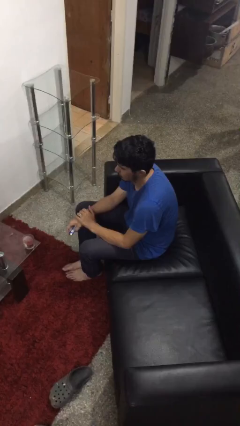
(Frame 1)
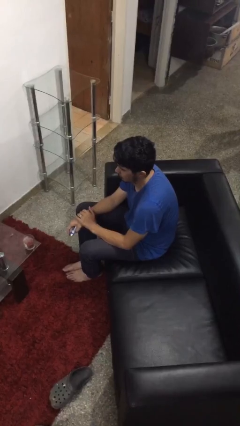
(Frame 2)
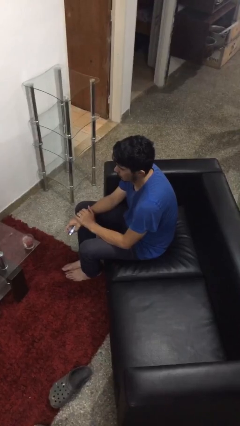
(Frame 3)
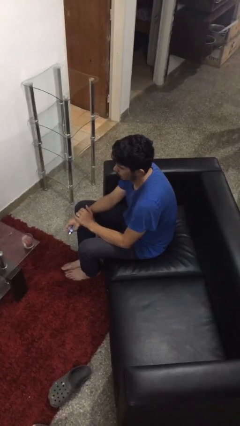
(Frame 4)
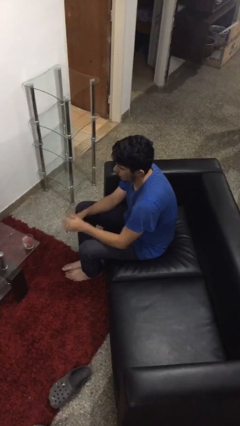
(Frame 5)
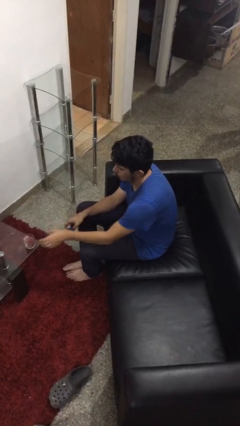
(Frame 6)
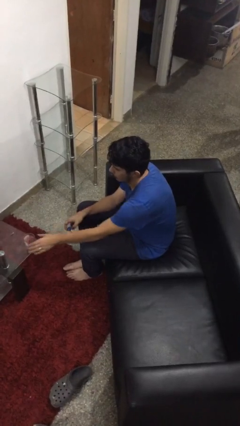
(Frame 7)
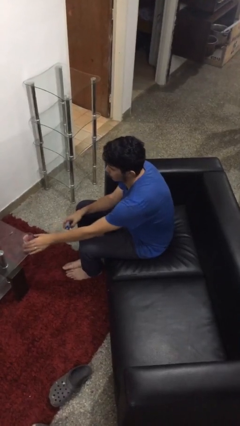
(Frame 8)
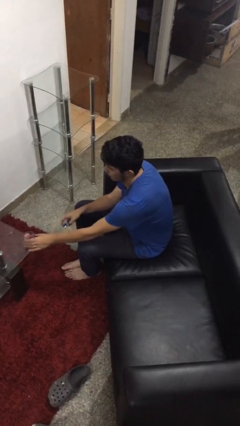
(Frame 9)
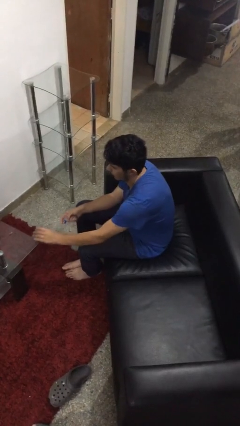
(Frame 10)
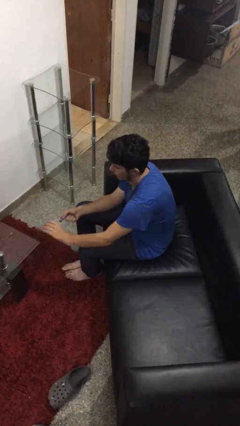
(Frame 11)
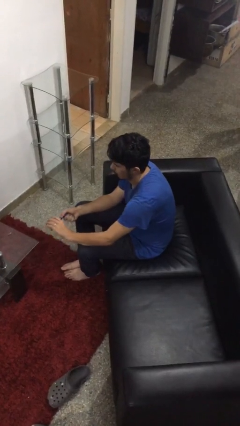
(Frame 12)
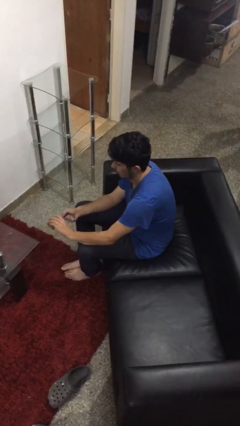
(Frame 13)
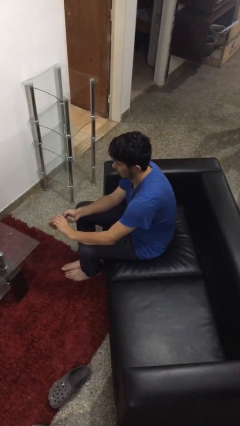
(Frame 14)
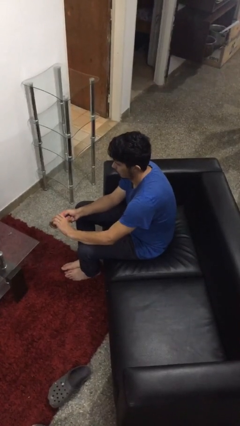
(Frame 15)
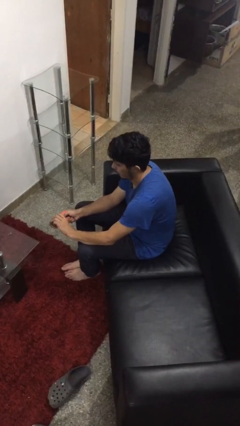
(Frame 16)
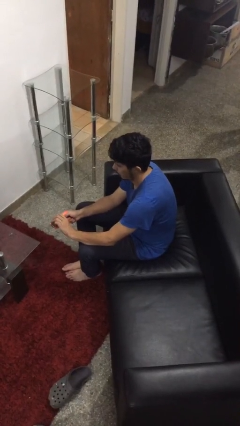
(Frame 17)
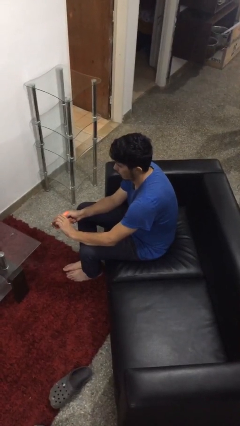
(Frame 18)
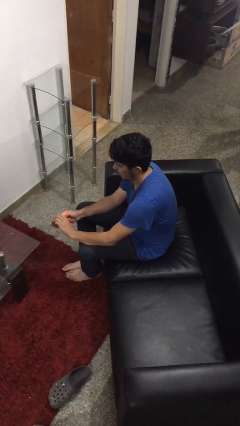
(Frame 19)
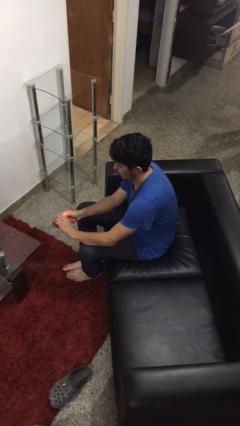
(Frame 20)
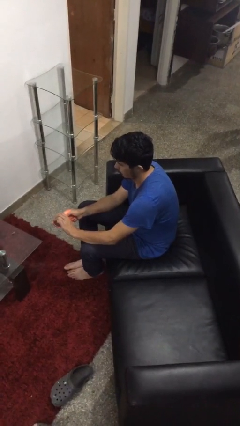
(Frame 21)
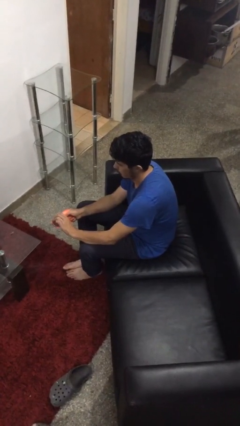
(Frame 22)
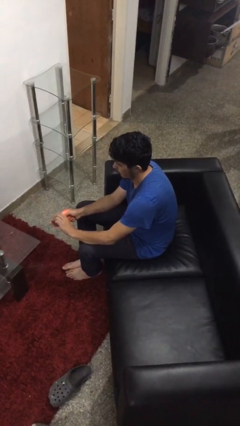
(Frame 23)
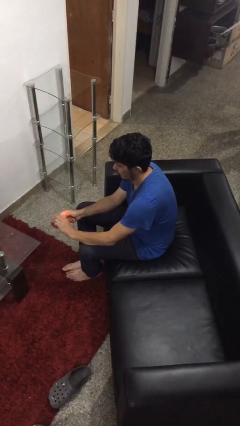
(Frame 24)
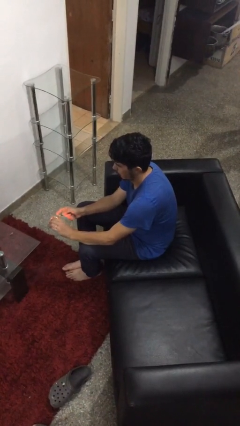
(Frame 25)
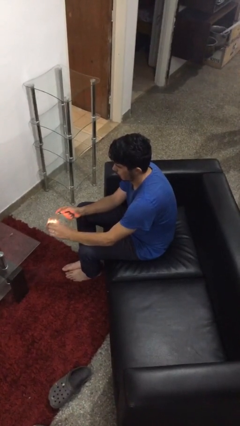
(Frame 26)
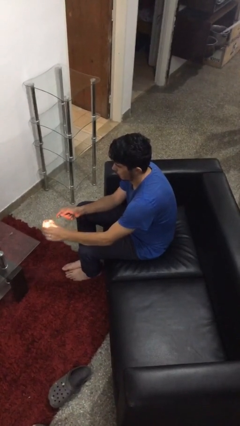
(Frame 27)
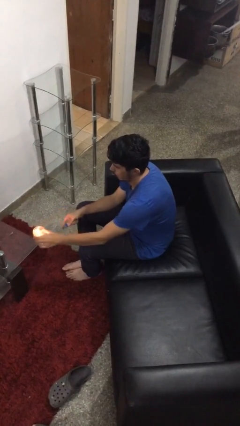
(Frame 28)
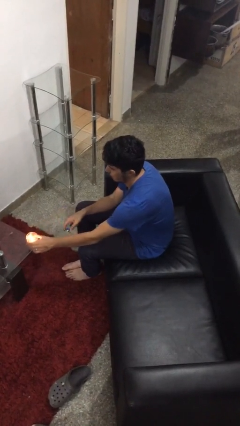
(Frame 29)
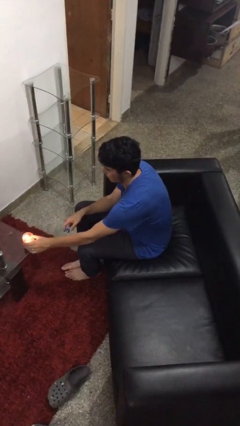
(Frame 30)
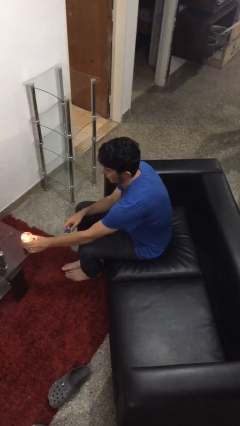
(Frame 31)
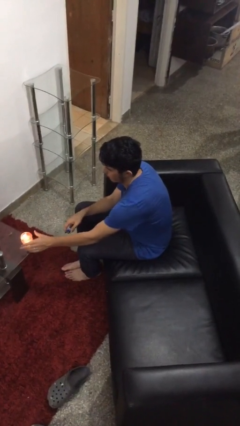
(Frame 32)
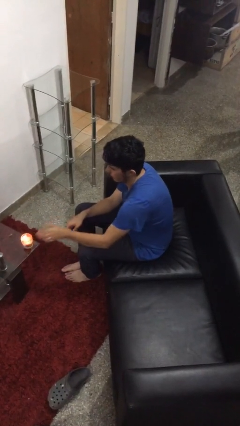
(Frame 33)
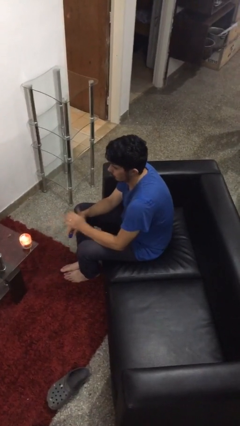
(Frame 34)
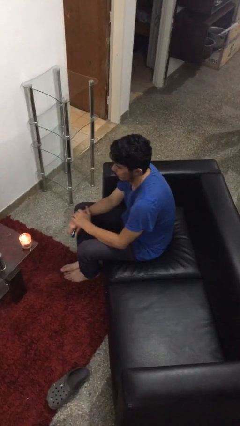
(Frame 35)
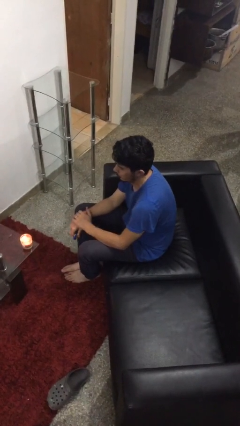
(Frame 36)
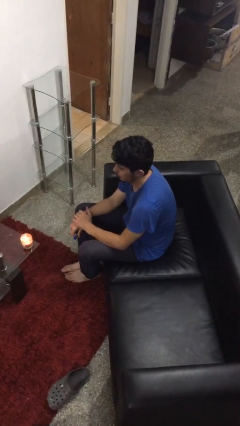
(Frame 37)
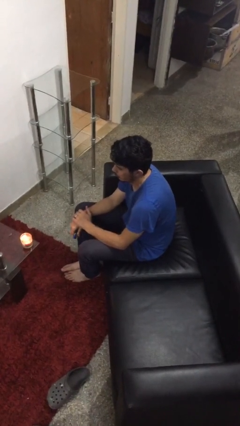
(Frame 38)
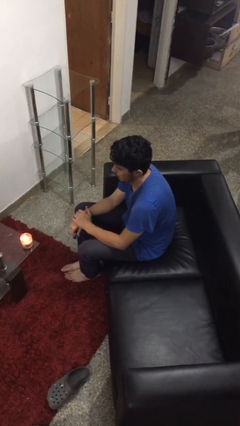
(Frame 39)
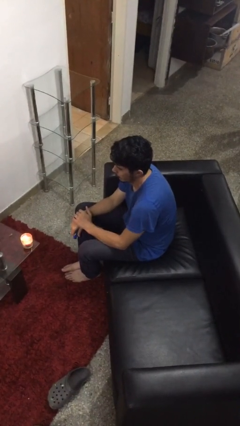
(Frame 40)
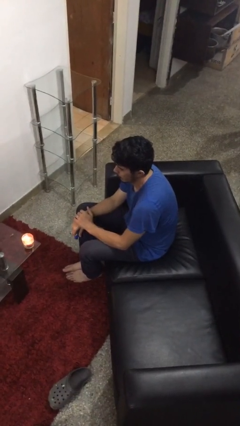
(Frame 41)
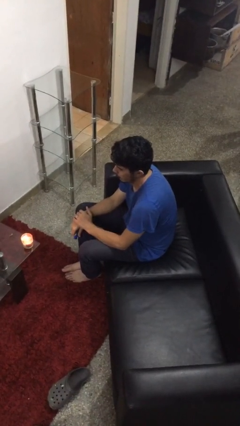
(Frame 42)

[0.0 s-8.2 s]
person lights candle

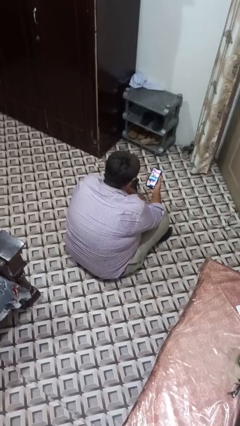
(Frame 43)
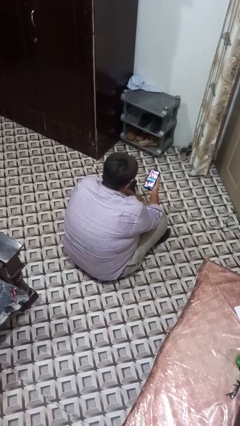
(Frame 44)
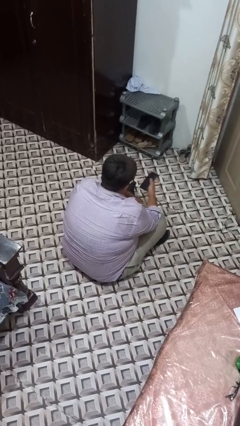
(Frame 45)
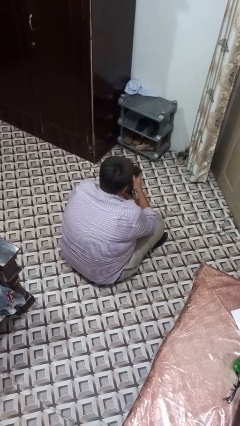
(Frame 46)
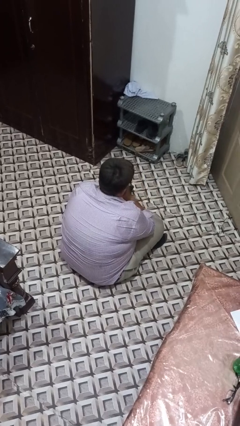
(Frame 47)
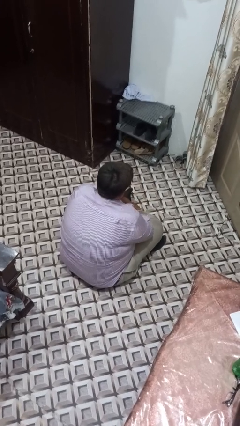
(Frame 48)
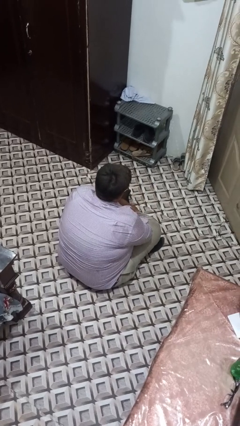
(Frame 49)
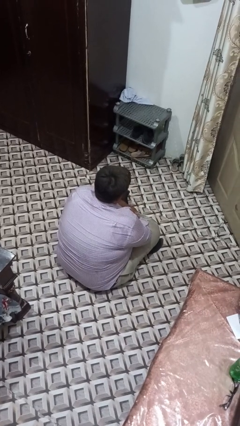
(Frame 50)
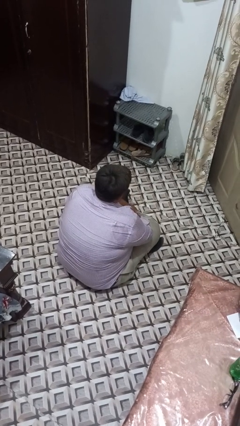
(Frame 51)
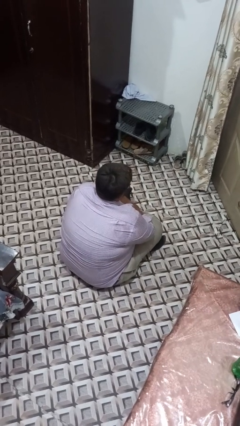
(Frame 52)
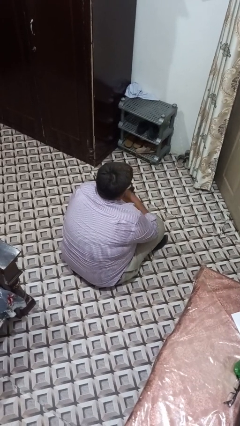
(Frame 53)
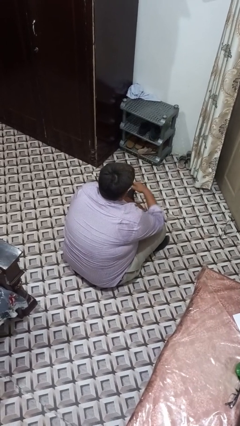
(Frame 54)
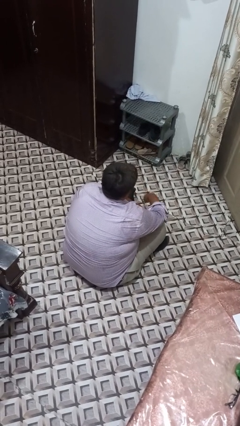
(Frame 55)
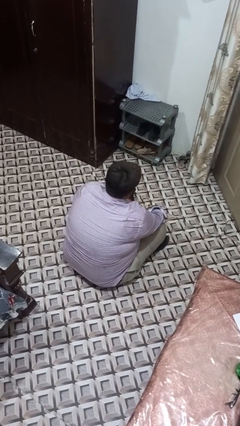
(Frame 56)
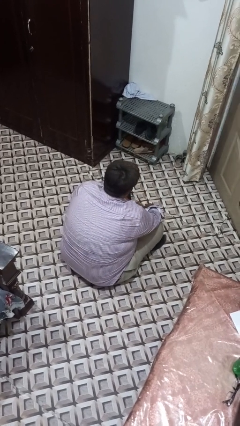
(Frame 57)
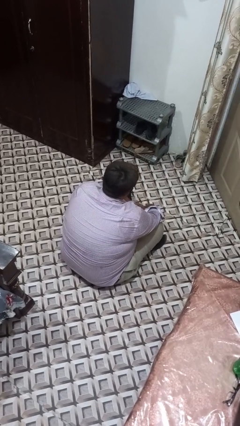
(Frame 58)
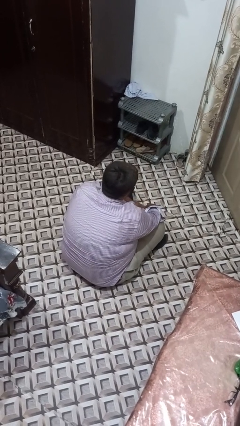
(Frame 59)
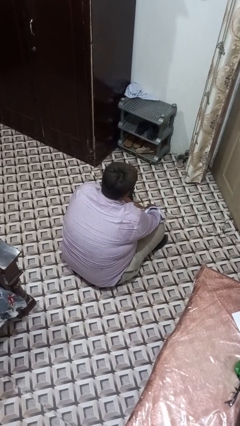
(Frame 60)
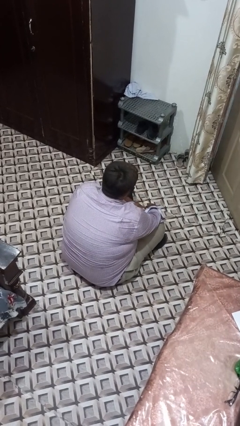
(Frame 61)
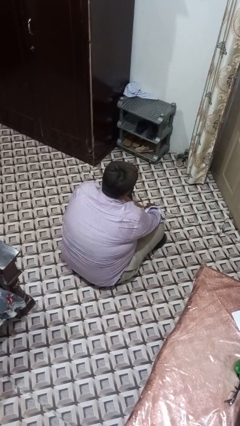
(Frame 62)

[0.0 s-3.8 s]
person puts phone into pocket

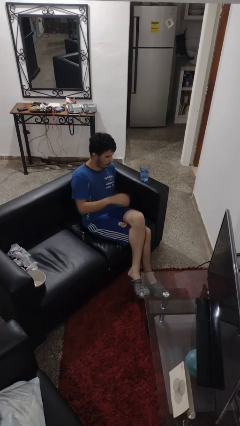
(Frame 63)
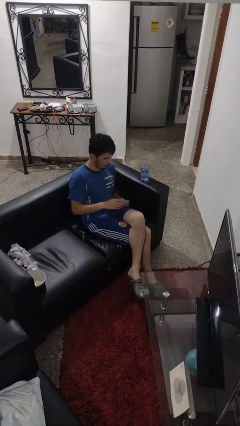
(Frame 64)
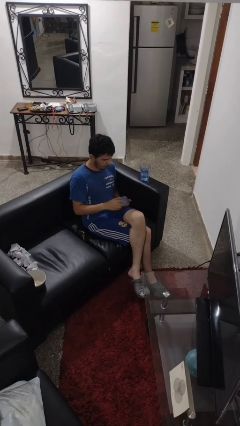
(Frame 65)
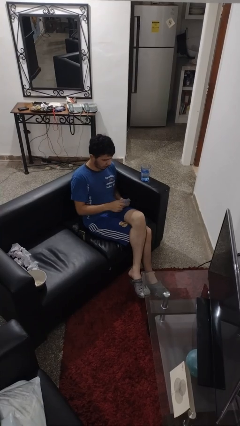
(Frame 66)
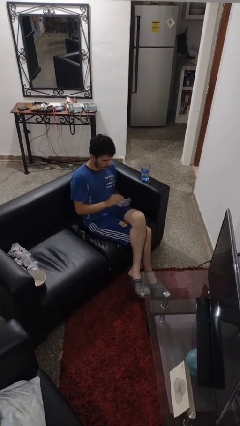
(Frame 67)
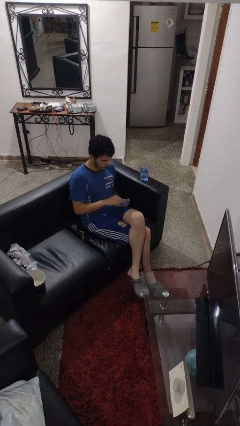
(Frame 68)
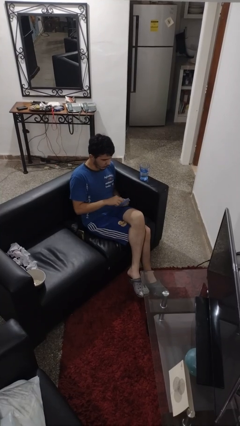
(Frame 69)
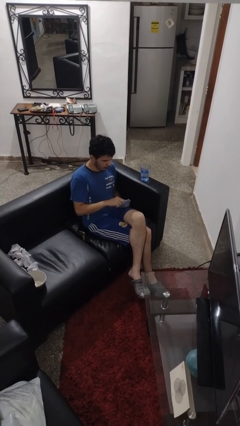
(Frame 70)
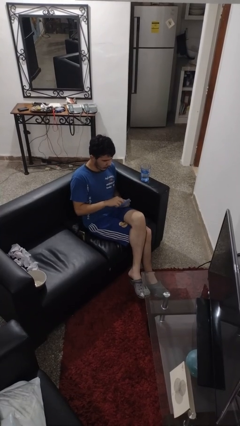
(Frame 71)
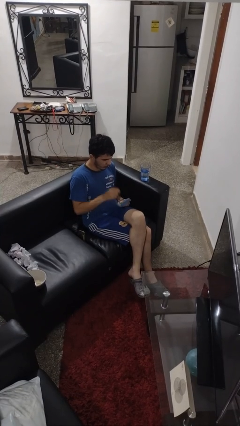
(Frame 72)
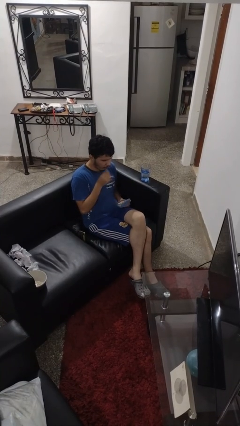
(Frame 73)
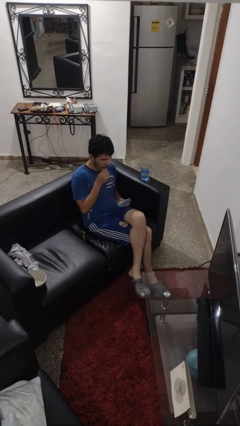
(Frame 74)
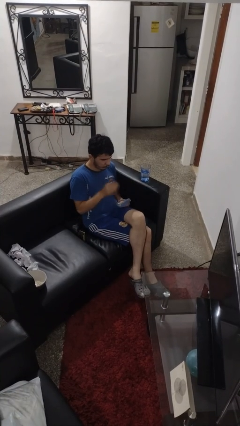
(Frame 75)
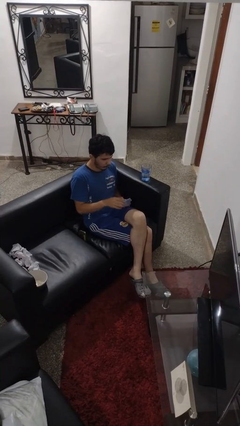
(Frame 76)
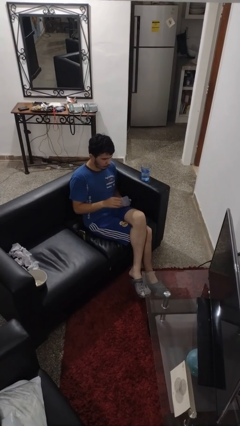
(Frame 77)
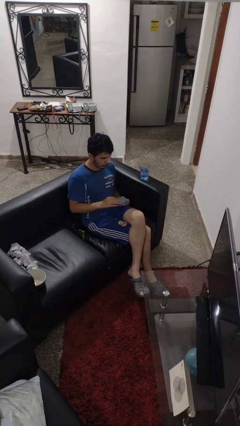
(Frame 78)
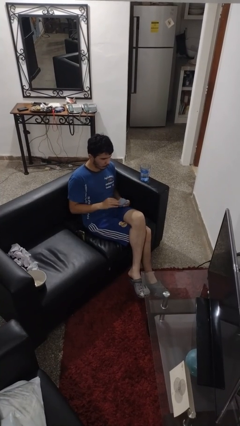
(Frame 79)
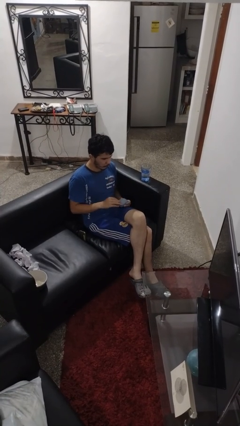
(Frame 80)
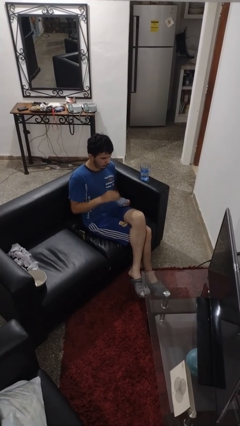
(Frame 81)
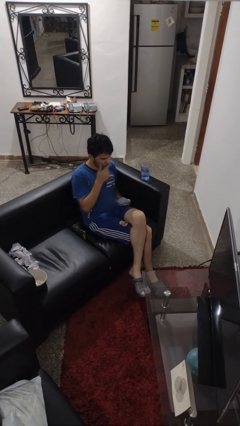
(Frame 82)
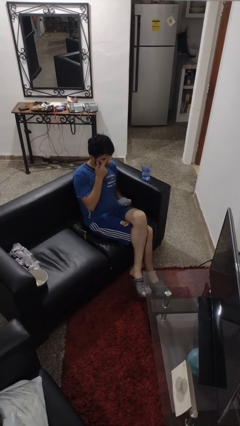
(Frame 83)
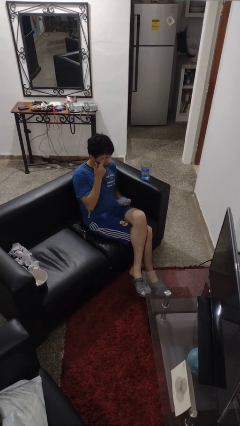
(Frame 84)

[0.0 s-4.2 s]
person takes medicine pills

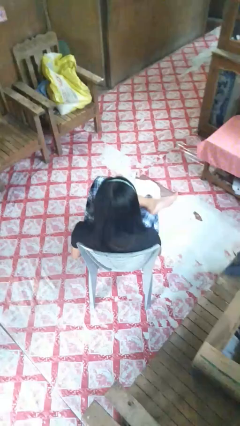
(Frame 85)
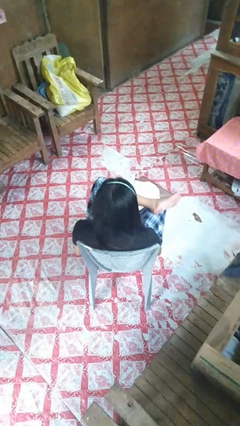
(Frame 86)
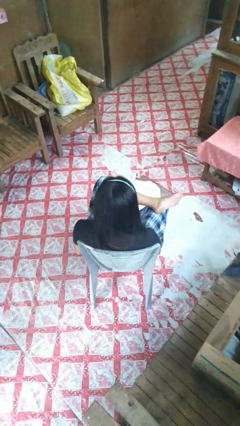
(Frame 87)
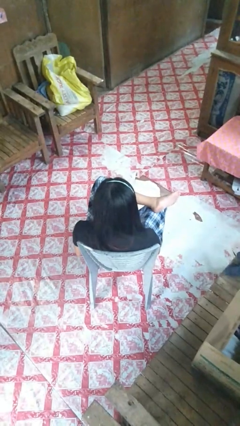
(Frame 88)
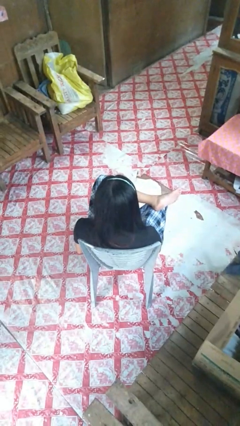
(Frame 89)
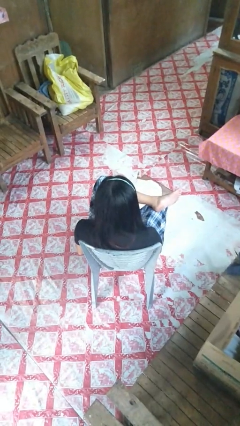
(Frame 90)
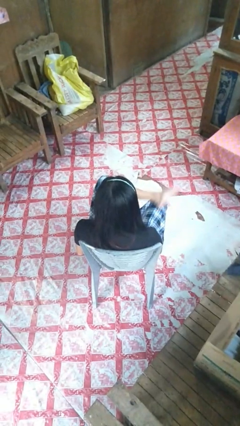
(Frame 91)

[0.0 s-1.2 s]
person crosses legs

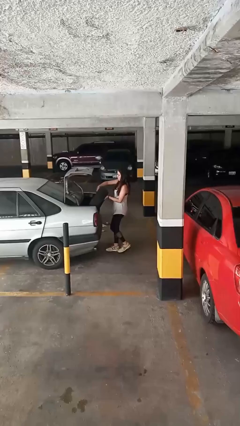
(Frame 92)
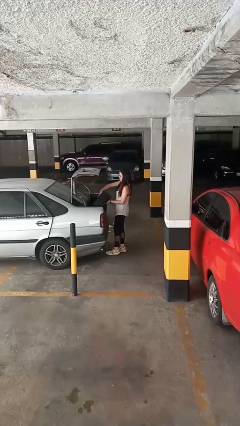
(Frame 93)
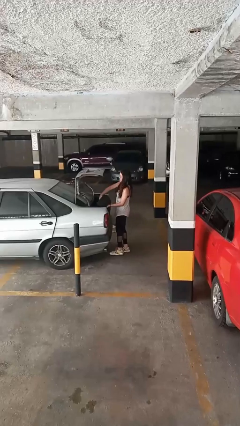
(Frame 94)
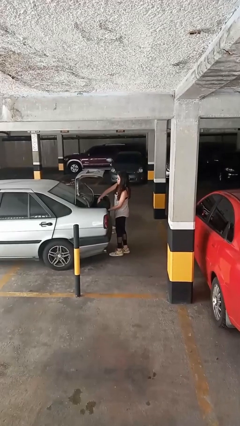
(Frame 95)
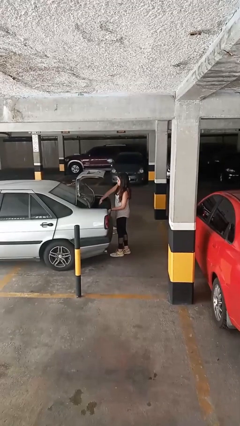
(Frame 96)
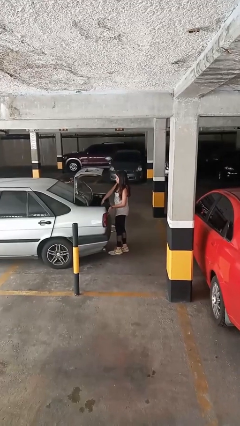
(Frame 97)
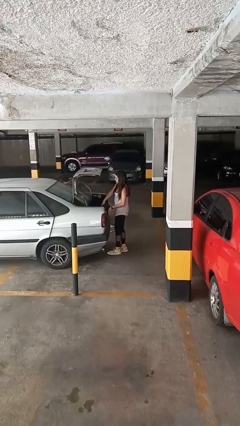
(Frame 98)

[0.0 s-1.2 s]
person loads car
